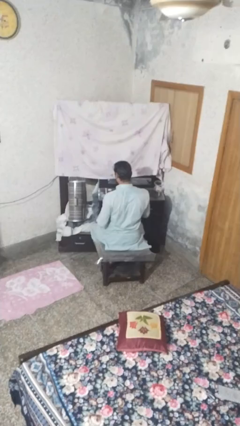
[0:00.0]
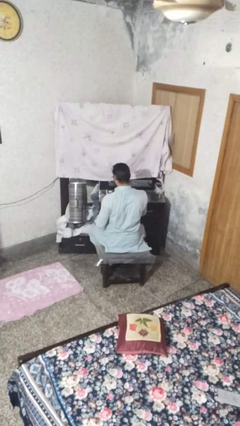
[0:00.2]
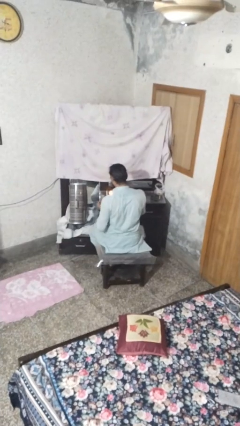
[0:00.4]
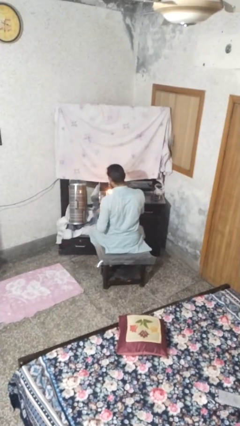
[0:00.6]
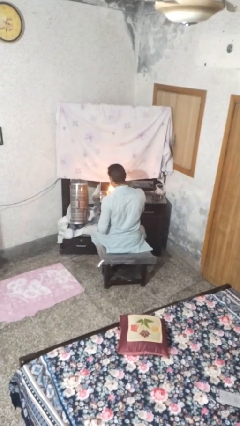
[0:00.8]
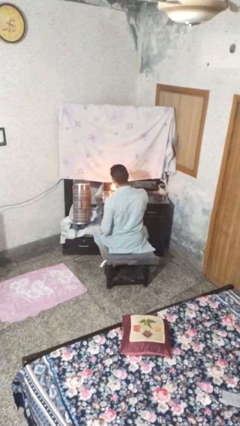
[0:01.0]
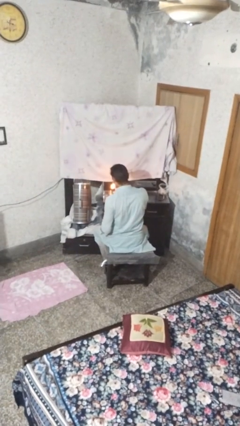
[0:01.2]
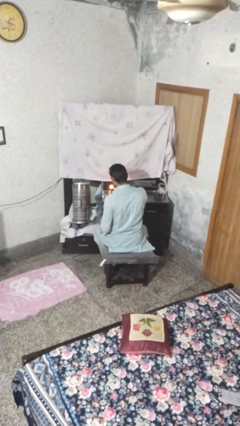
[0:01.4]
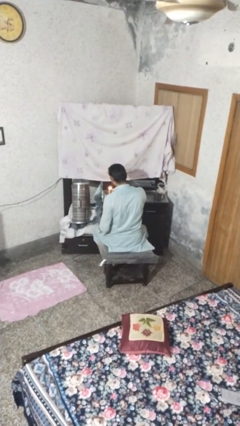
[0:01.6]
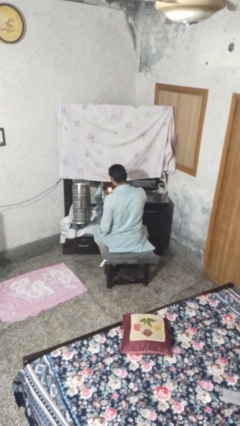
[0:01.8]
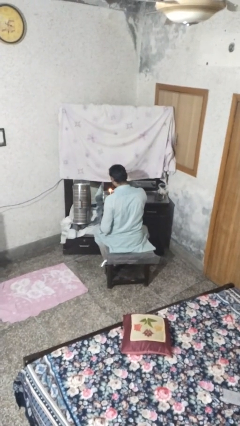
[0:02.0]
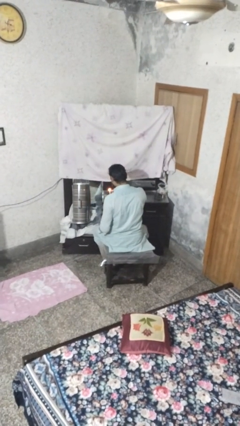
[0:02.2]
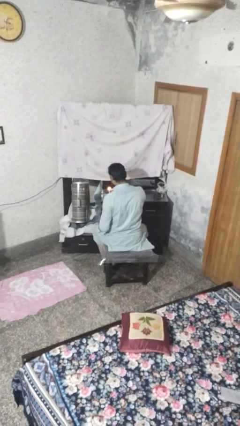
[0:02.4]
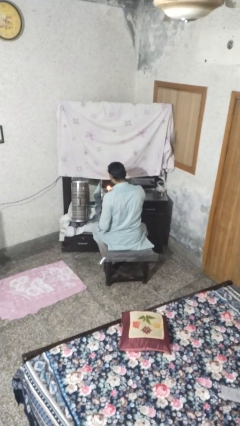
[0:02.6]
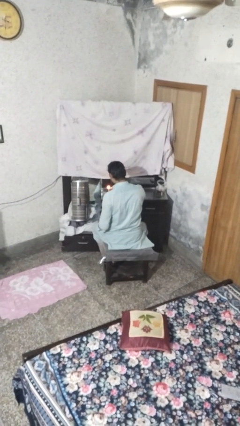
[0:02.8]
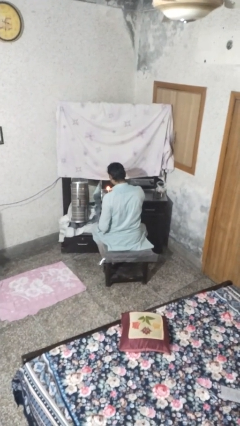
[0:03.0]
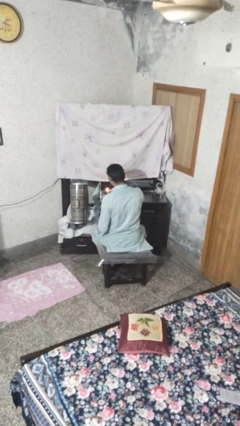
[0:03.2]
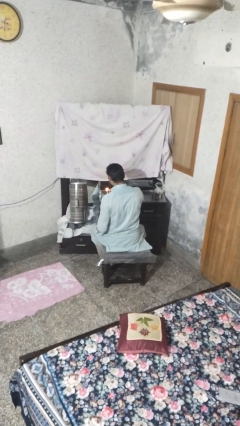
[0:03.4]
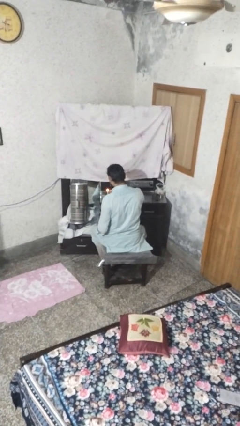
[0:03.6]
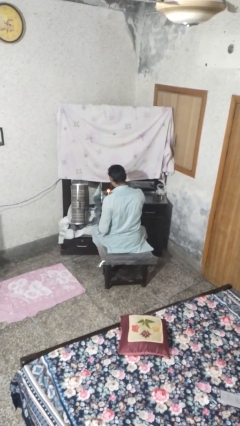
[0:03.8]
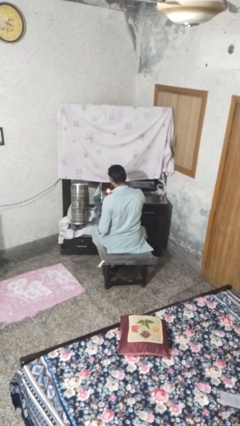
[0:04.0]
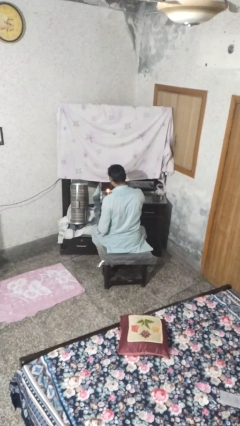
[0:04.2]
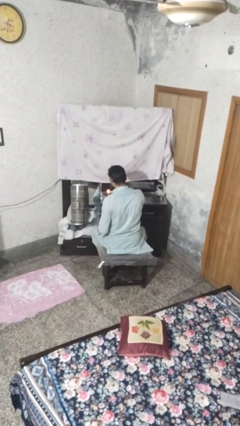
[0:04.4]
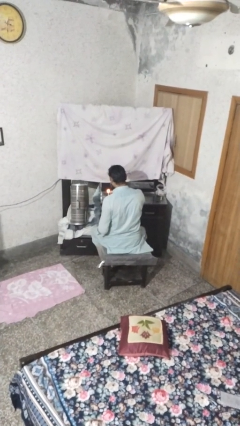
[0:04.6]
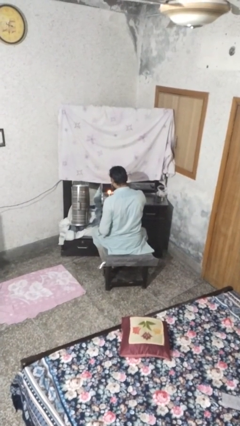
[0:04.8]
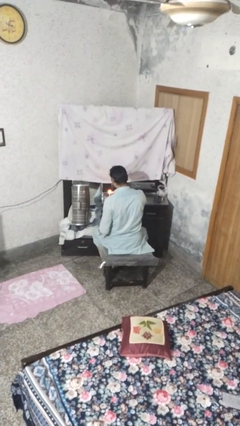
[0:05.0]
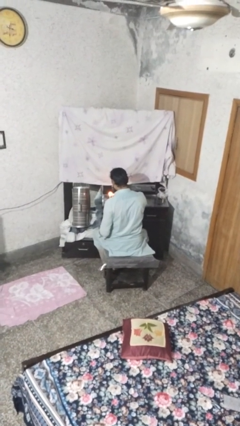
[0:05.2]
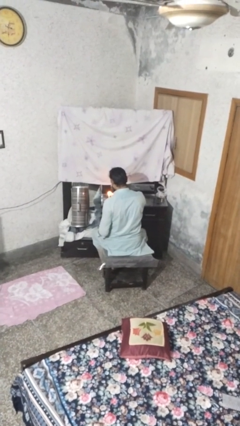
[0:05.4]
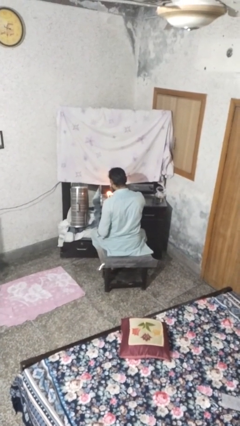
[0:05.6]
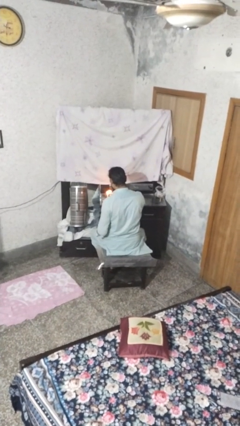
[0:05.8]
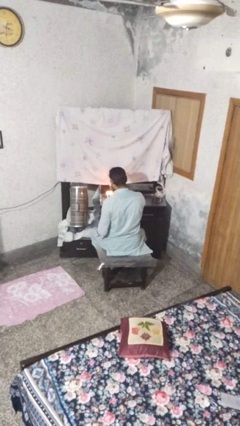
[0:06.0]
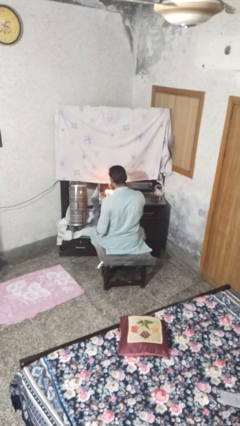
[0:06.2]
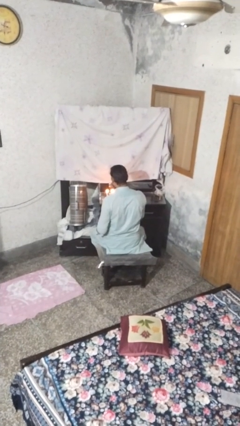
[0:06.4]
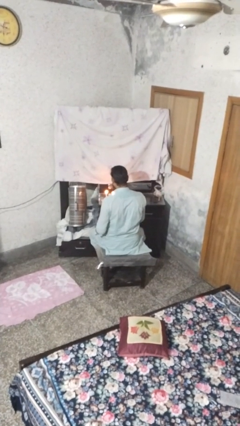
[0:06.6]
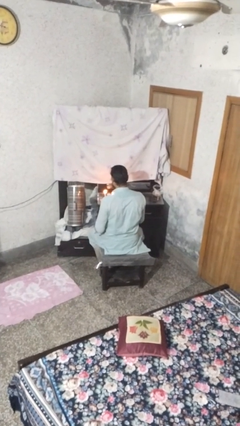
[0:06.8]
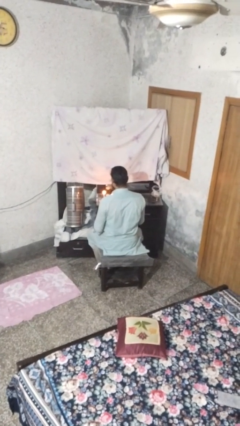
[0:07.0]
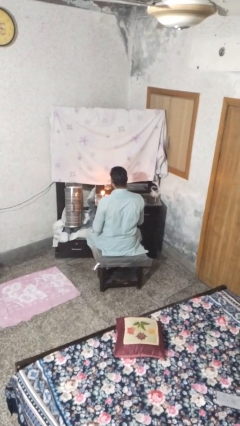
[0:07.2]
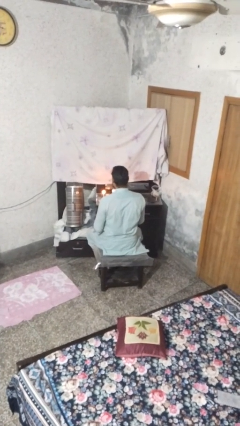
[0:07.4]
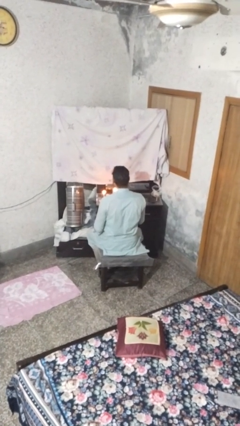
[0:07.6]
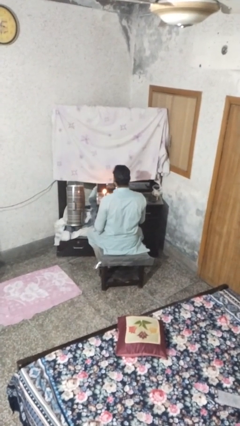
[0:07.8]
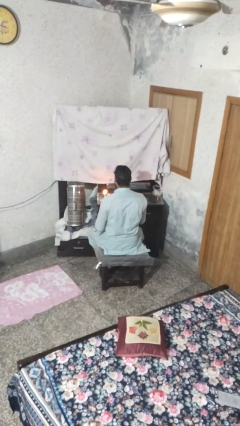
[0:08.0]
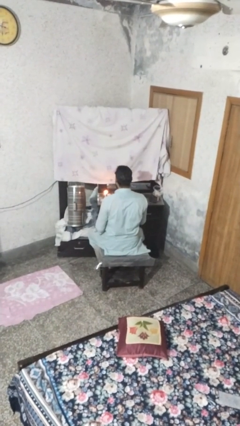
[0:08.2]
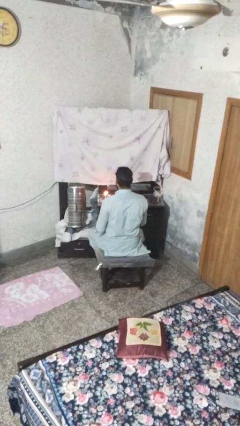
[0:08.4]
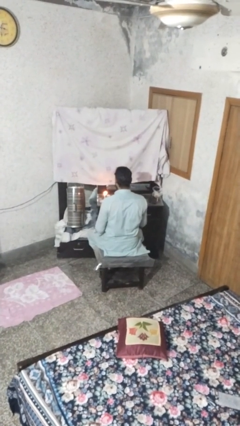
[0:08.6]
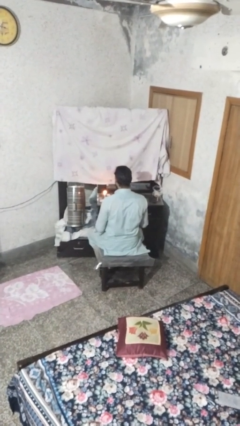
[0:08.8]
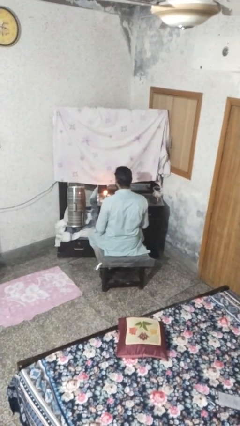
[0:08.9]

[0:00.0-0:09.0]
person lights candle

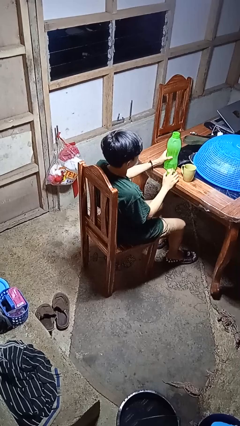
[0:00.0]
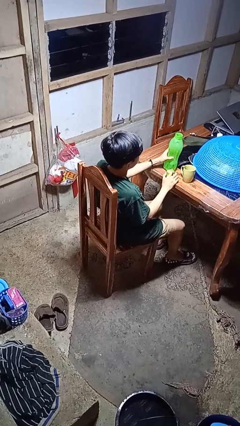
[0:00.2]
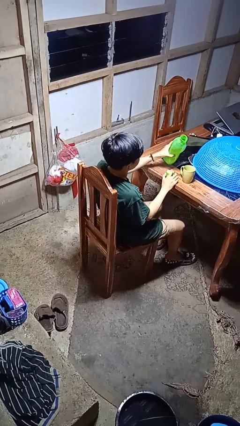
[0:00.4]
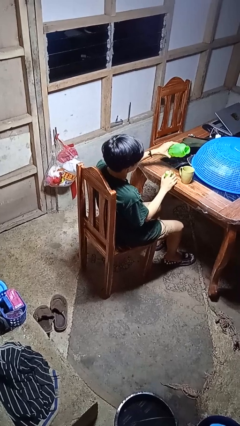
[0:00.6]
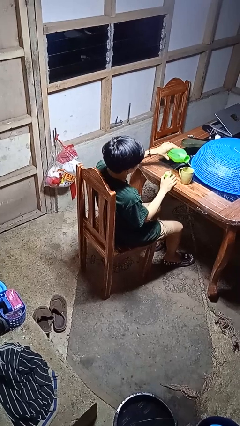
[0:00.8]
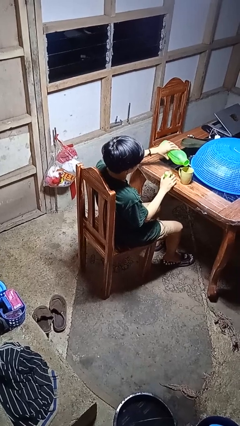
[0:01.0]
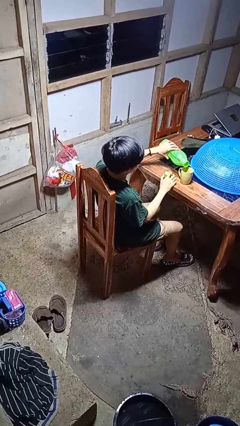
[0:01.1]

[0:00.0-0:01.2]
person pours liquid into cup

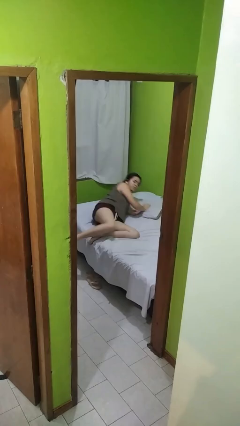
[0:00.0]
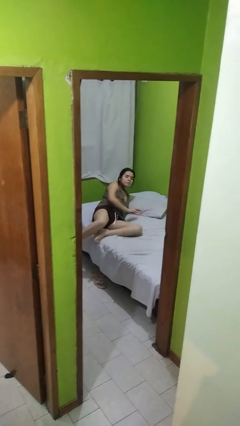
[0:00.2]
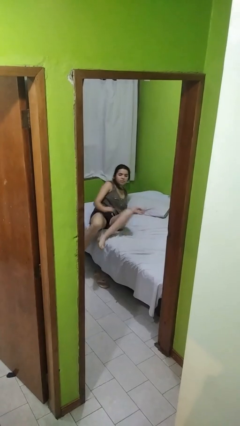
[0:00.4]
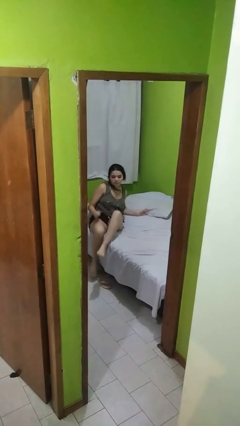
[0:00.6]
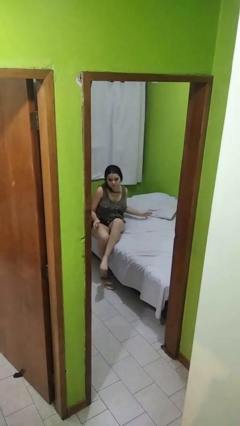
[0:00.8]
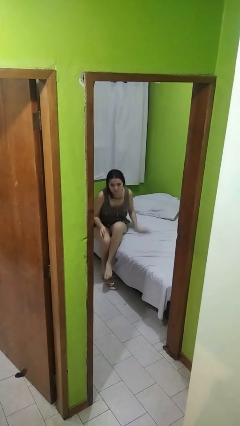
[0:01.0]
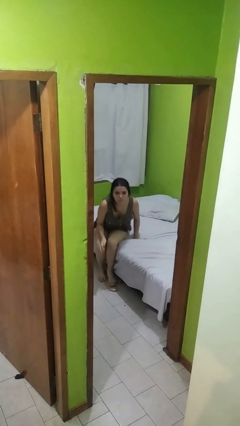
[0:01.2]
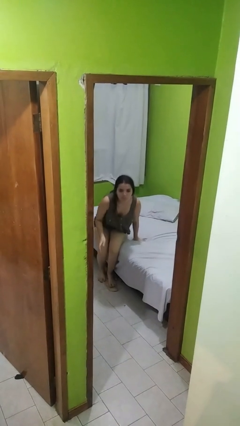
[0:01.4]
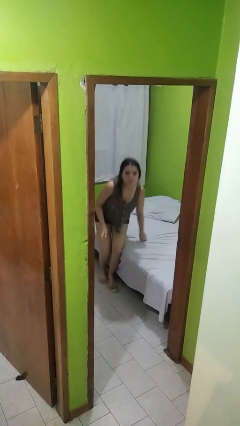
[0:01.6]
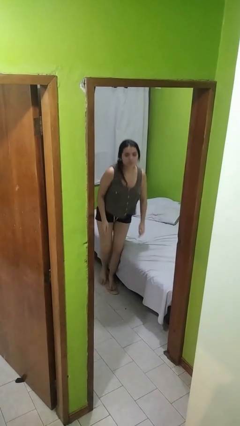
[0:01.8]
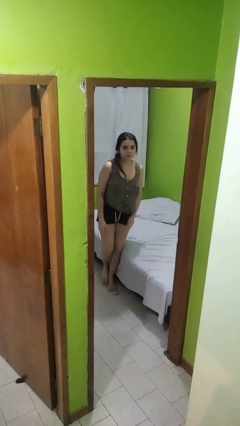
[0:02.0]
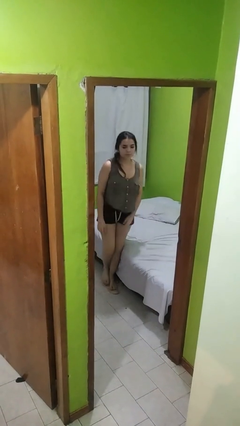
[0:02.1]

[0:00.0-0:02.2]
person stands up

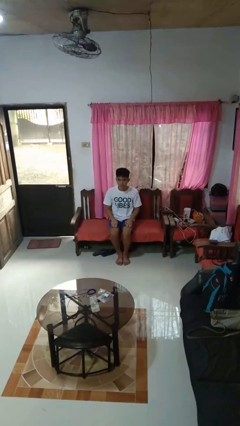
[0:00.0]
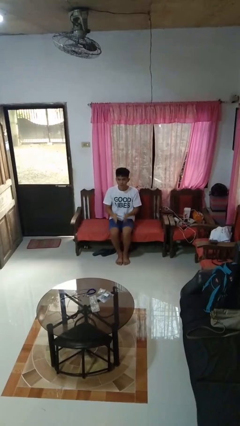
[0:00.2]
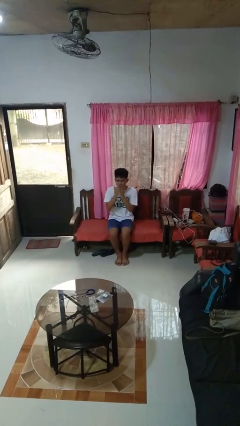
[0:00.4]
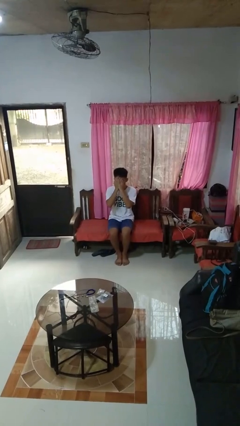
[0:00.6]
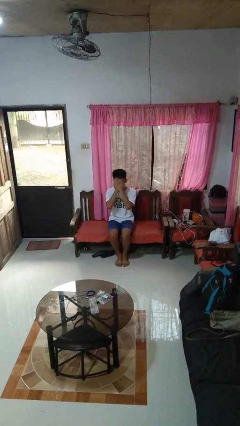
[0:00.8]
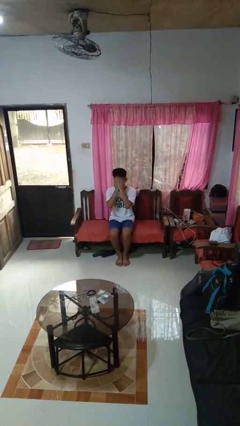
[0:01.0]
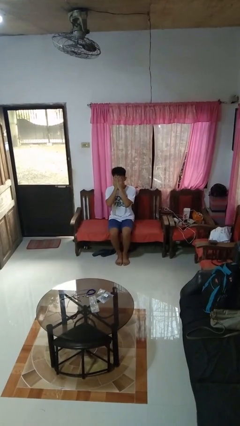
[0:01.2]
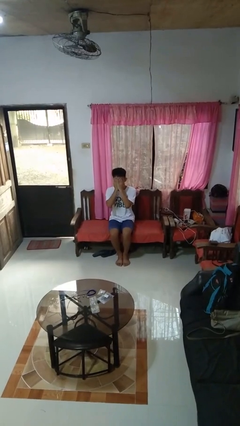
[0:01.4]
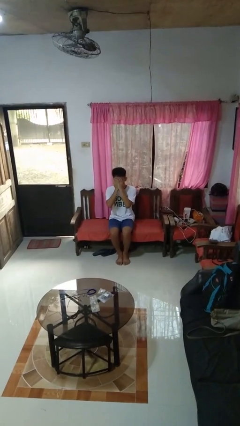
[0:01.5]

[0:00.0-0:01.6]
person covers face with hands

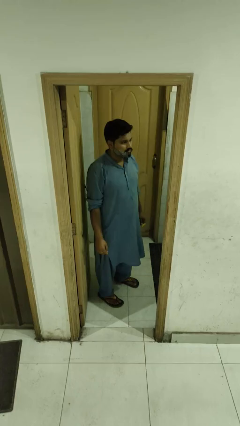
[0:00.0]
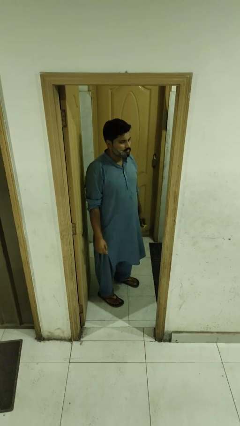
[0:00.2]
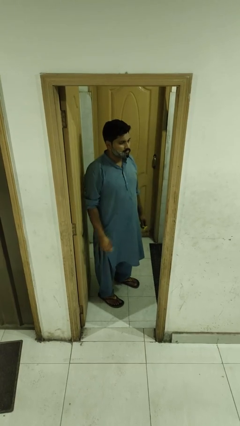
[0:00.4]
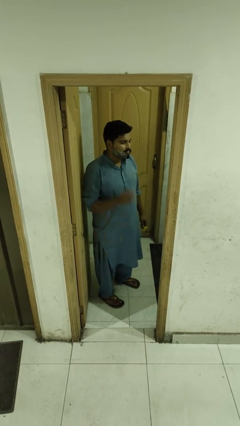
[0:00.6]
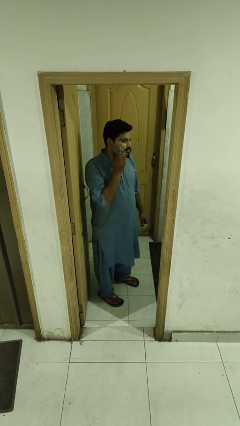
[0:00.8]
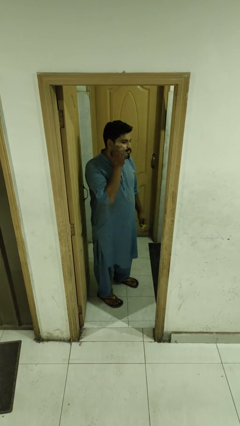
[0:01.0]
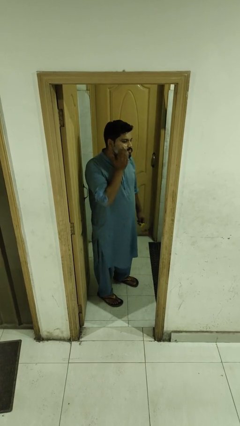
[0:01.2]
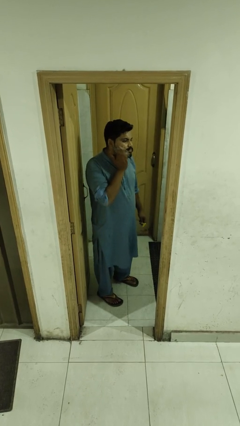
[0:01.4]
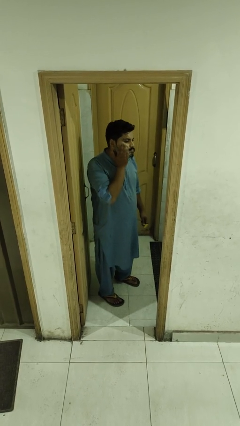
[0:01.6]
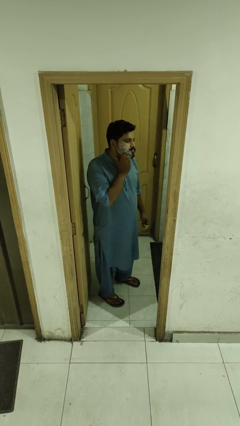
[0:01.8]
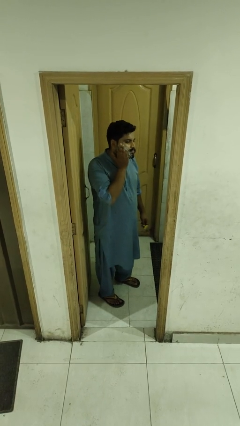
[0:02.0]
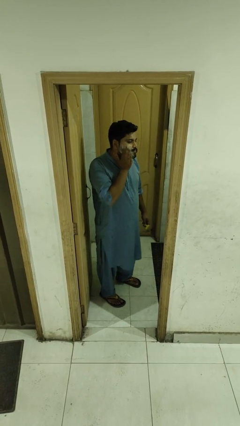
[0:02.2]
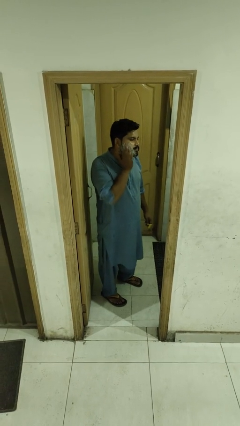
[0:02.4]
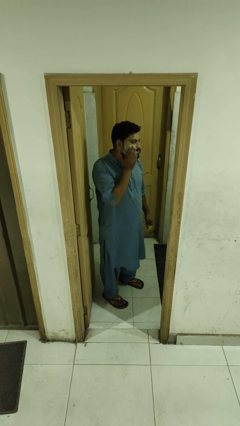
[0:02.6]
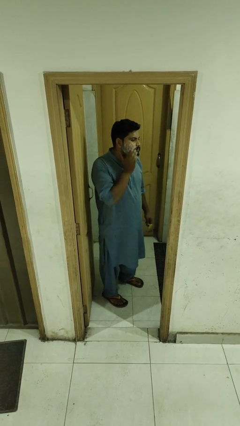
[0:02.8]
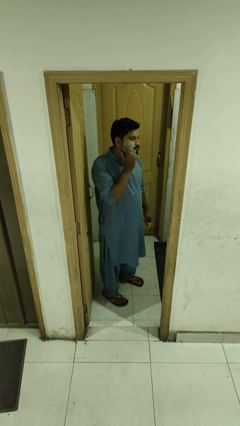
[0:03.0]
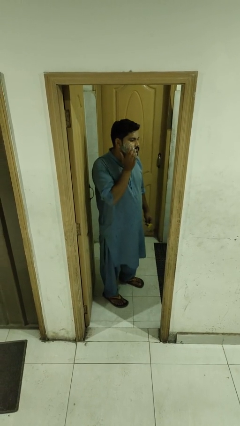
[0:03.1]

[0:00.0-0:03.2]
person applies shaving cream

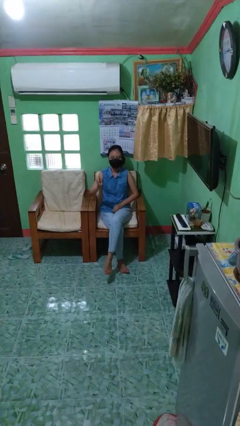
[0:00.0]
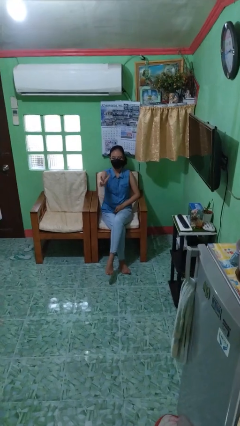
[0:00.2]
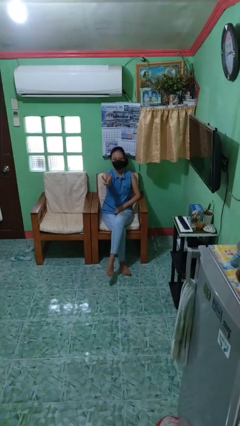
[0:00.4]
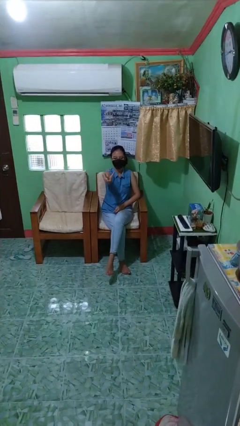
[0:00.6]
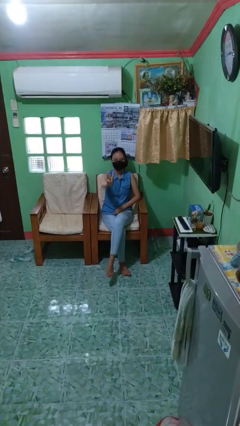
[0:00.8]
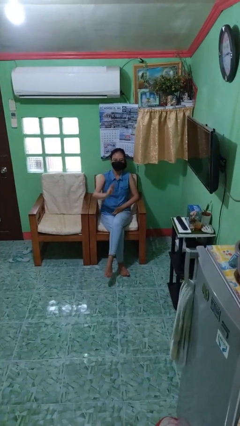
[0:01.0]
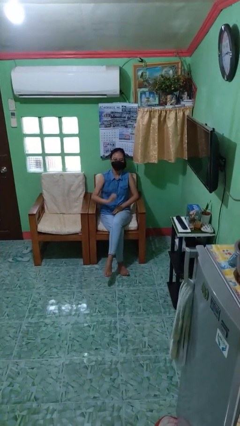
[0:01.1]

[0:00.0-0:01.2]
person gestures number three
